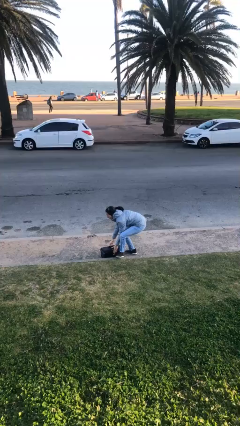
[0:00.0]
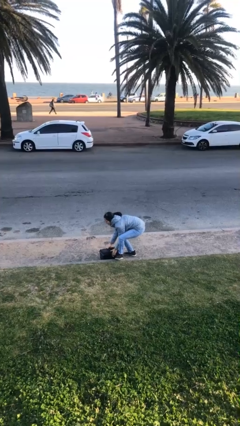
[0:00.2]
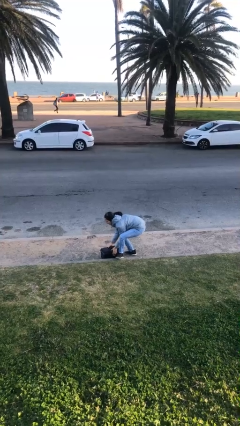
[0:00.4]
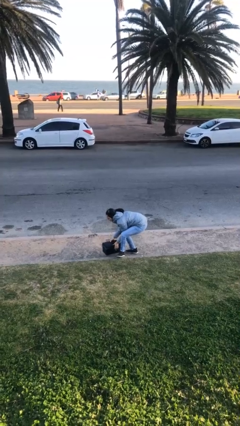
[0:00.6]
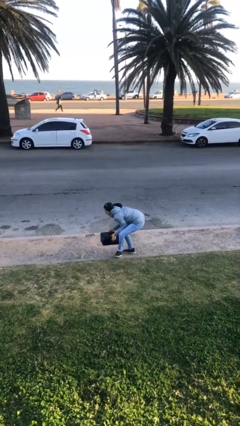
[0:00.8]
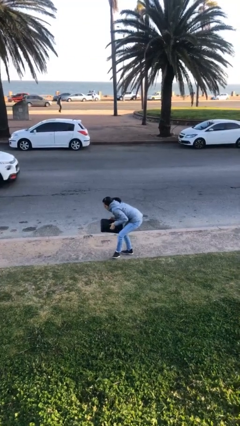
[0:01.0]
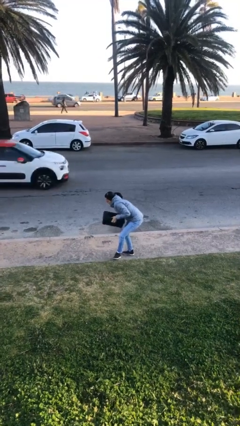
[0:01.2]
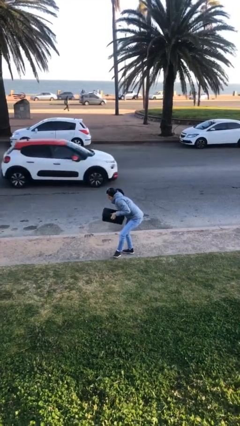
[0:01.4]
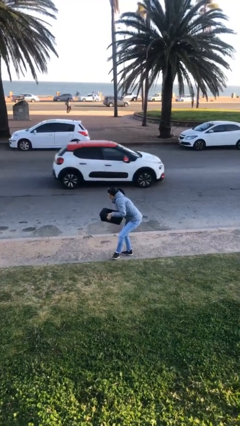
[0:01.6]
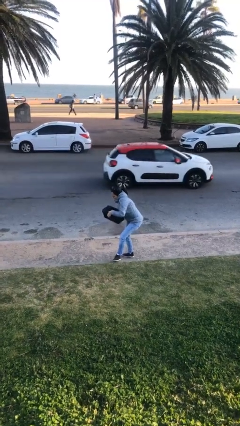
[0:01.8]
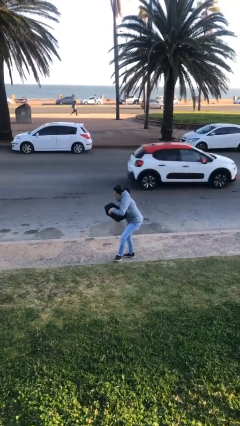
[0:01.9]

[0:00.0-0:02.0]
person picks up object from floor

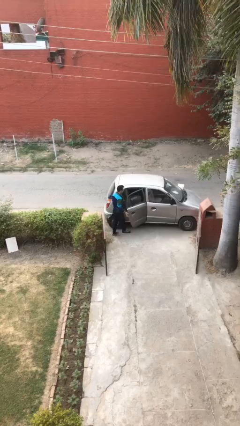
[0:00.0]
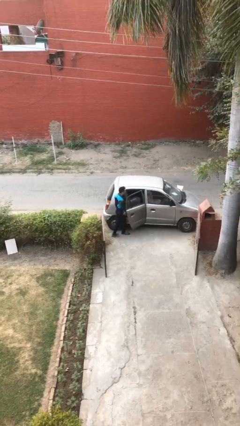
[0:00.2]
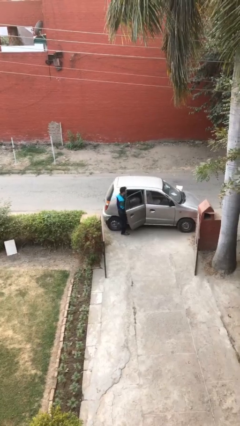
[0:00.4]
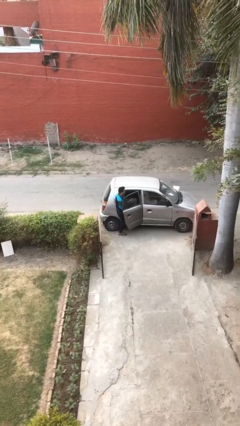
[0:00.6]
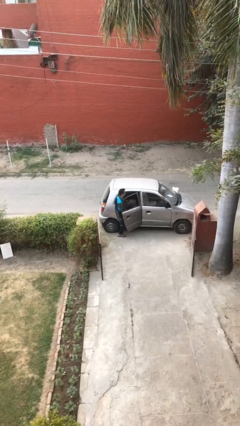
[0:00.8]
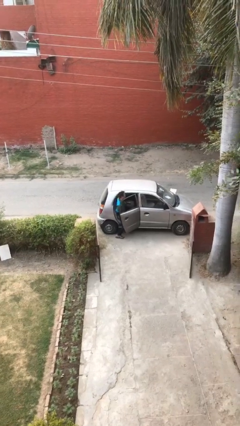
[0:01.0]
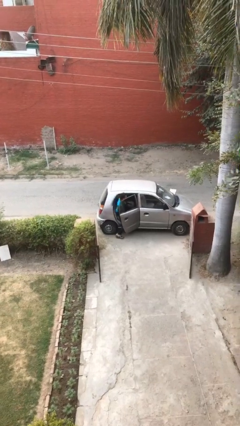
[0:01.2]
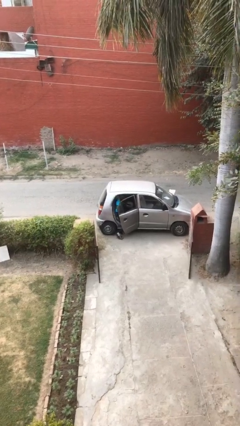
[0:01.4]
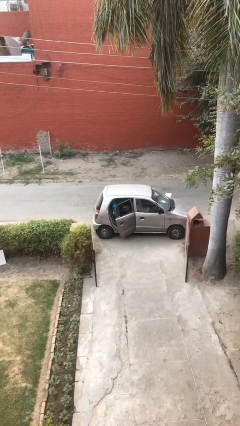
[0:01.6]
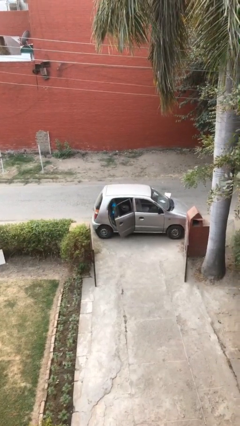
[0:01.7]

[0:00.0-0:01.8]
person enters car

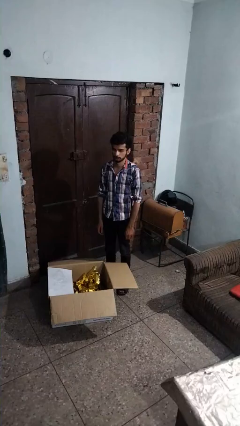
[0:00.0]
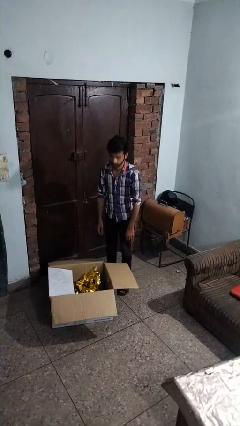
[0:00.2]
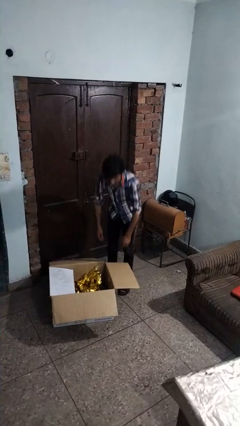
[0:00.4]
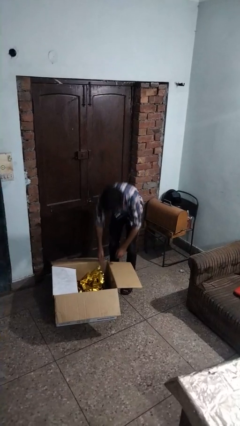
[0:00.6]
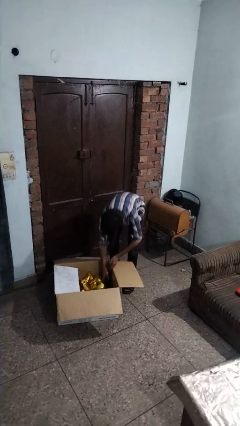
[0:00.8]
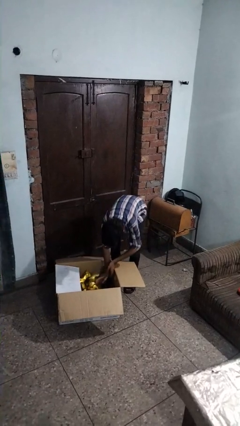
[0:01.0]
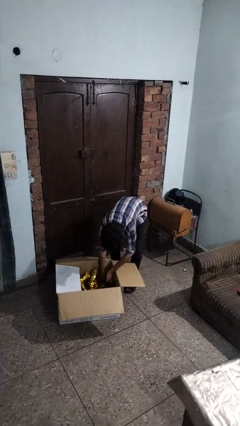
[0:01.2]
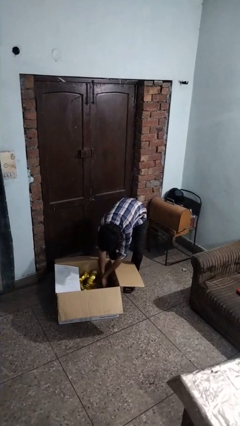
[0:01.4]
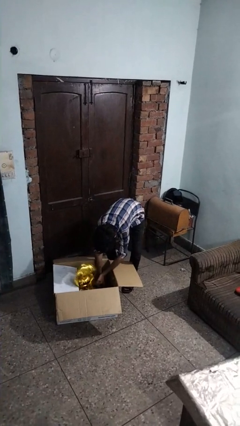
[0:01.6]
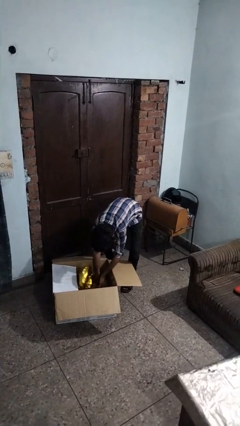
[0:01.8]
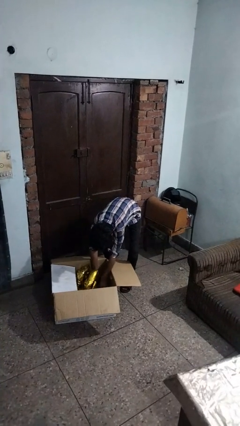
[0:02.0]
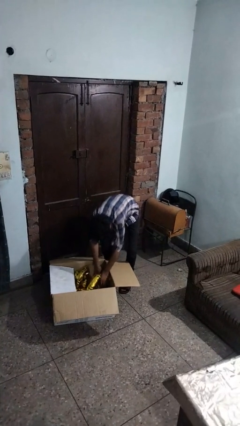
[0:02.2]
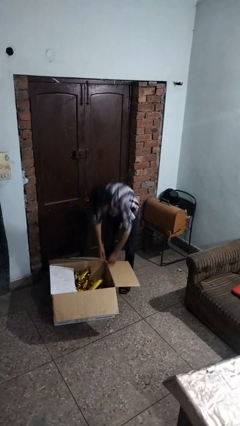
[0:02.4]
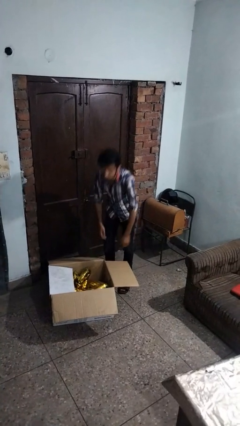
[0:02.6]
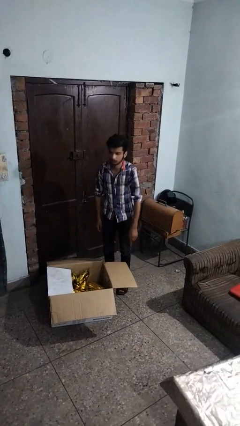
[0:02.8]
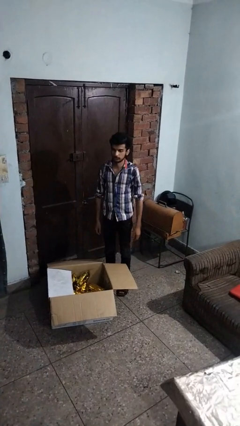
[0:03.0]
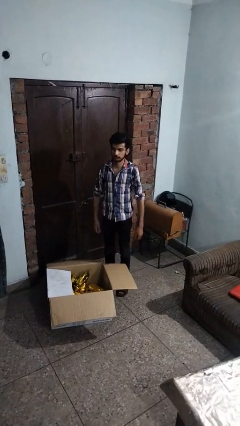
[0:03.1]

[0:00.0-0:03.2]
person searches in box

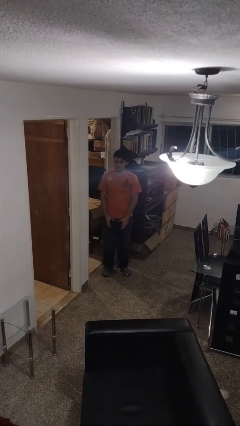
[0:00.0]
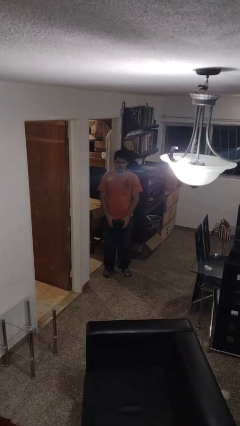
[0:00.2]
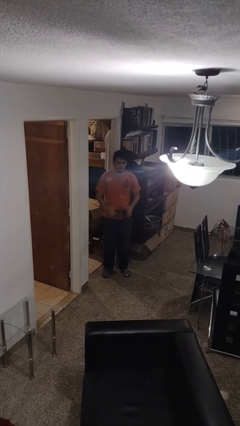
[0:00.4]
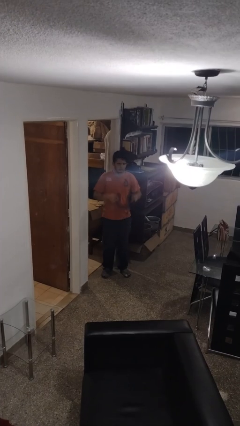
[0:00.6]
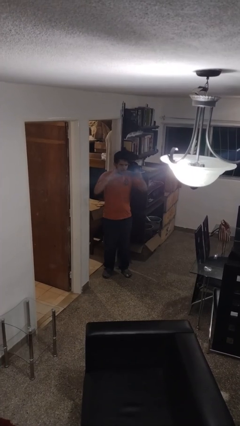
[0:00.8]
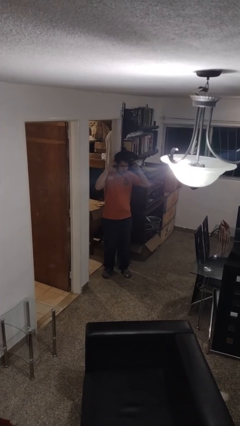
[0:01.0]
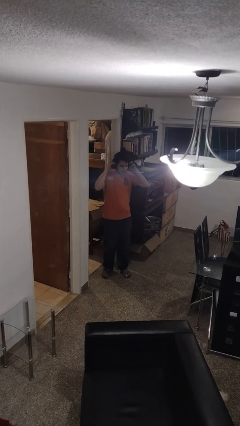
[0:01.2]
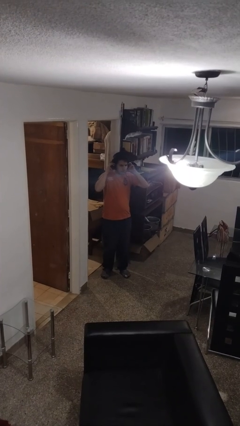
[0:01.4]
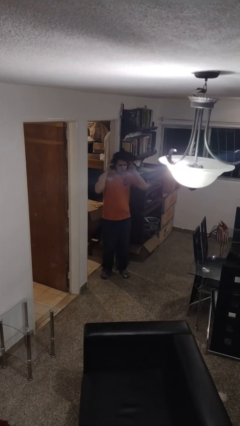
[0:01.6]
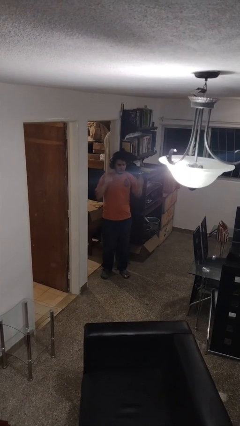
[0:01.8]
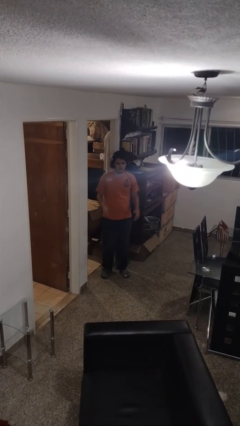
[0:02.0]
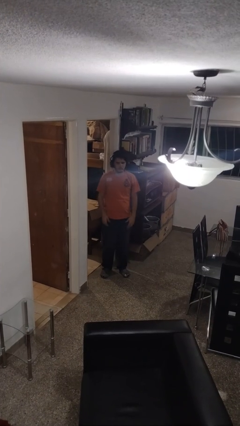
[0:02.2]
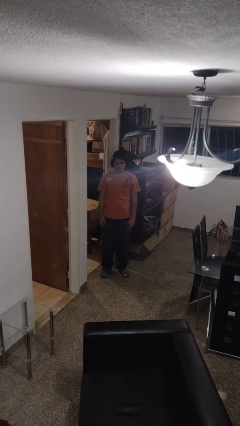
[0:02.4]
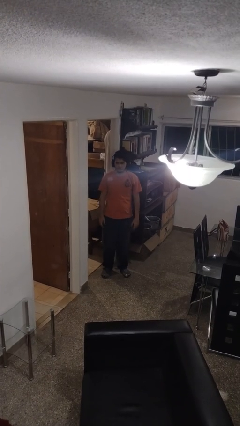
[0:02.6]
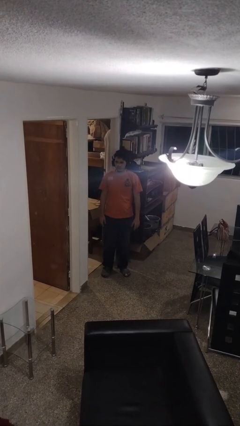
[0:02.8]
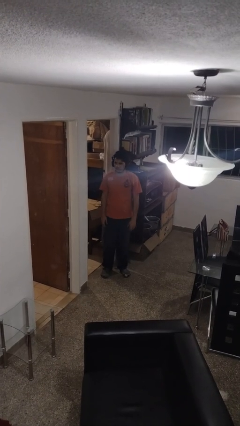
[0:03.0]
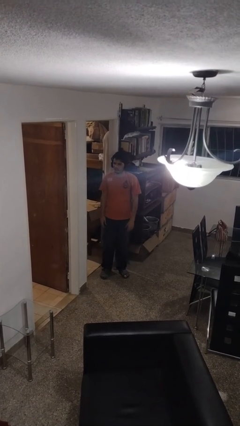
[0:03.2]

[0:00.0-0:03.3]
person puts on headphones

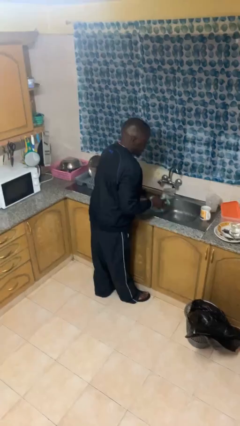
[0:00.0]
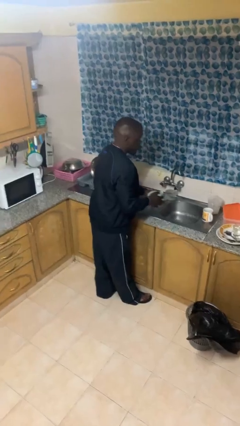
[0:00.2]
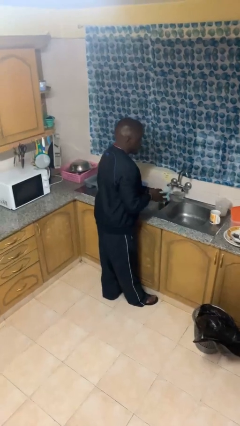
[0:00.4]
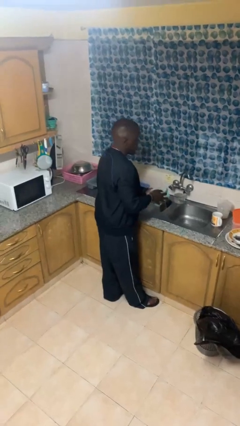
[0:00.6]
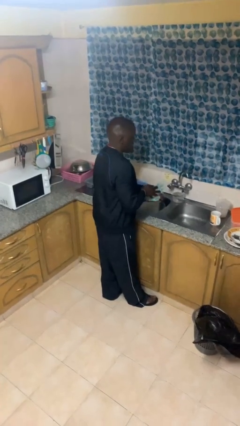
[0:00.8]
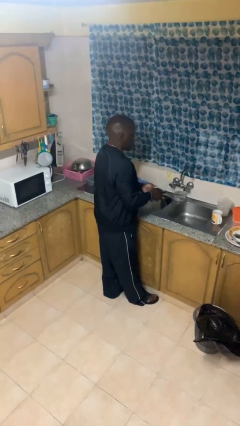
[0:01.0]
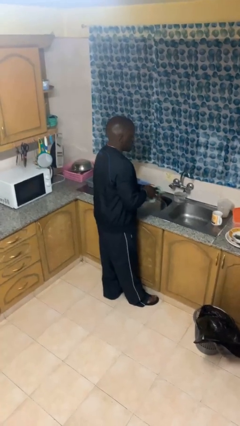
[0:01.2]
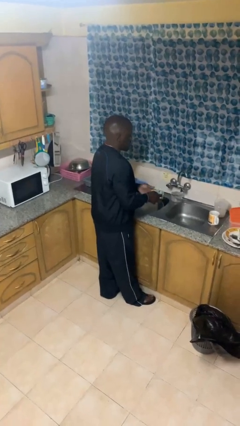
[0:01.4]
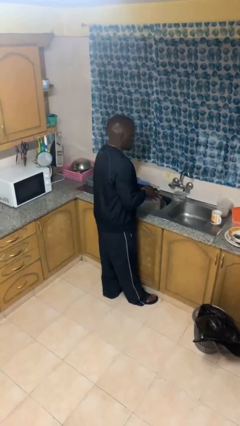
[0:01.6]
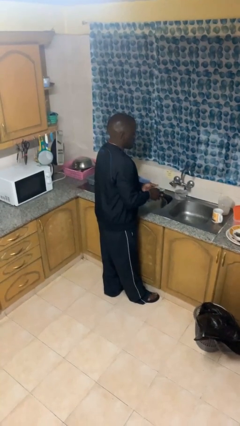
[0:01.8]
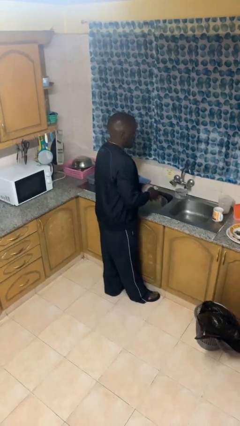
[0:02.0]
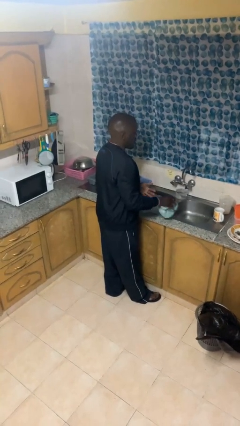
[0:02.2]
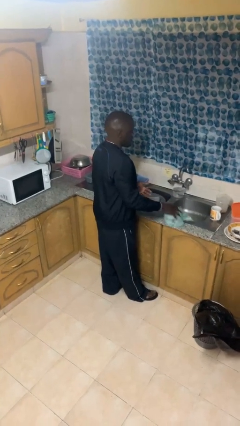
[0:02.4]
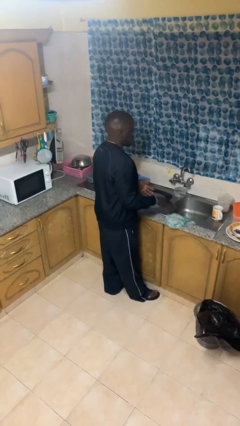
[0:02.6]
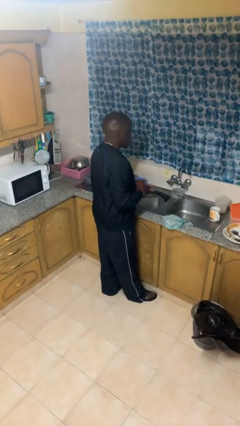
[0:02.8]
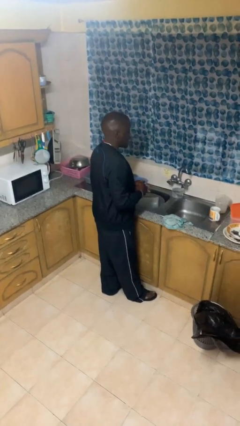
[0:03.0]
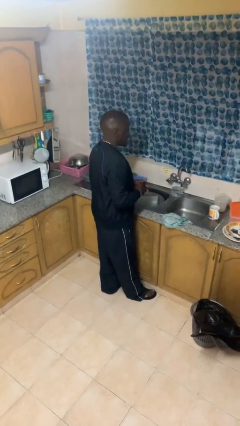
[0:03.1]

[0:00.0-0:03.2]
person dries hands with towel

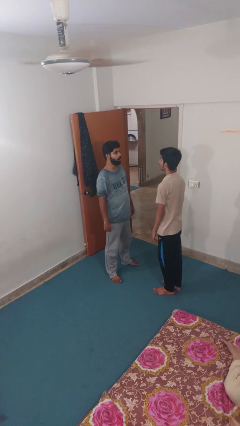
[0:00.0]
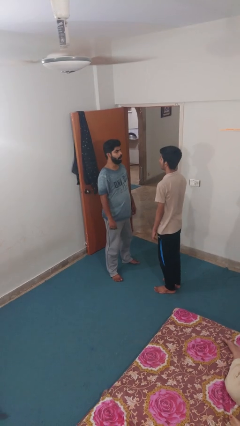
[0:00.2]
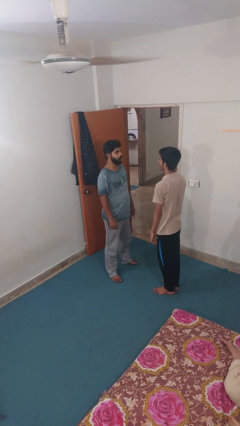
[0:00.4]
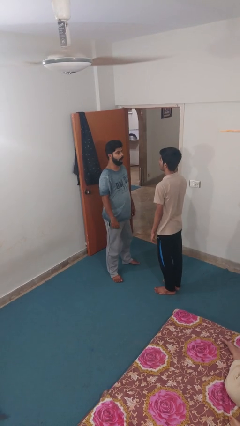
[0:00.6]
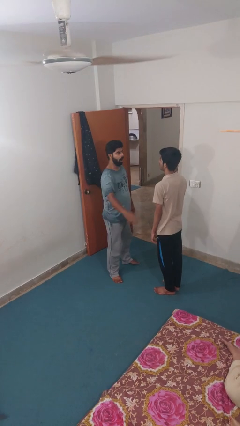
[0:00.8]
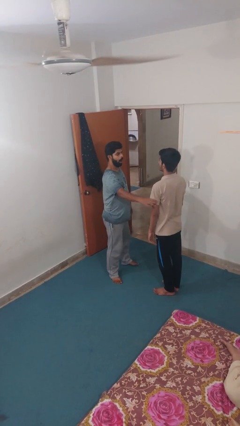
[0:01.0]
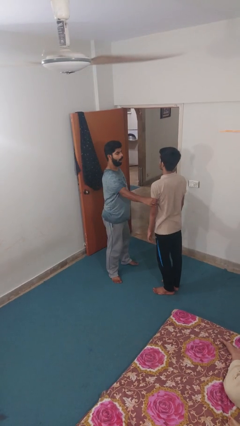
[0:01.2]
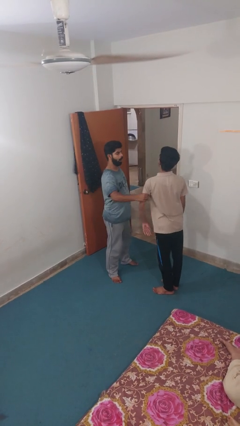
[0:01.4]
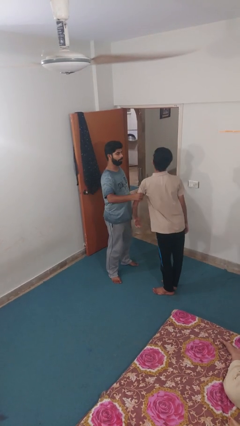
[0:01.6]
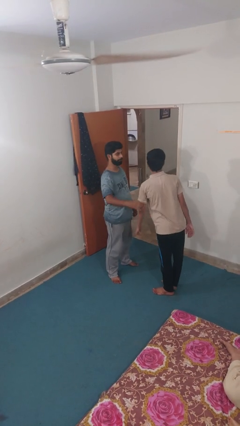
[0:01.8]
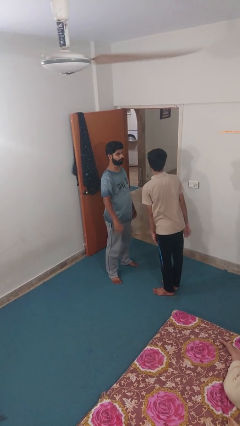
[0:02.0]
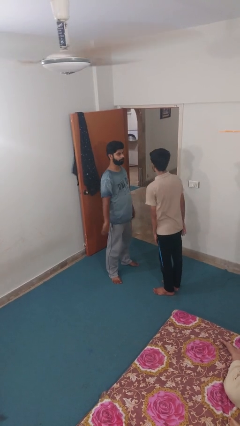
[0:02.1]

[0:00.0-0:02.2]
person grabs person by bicep

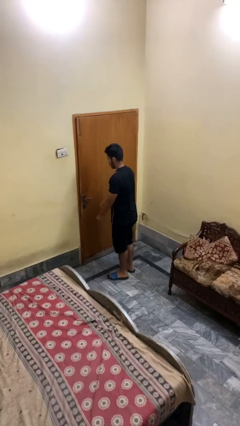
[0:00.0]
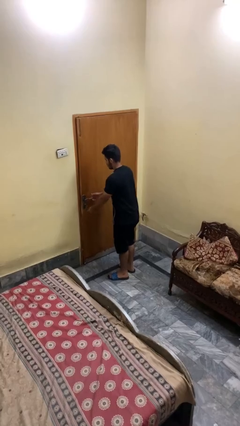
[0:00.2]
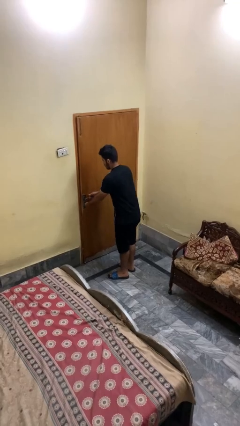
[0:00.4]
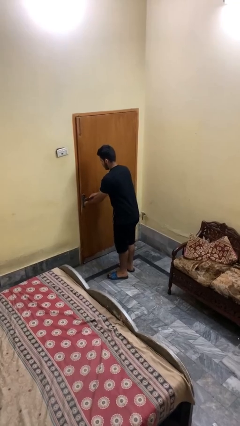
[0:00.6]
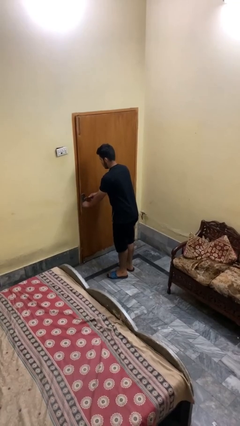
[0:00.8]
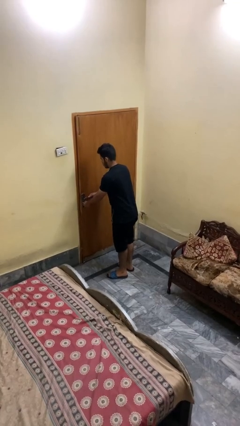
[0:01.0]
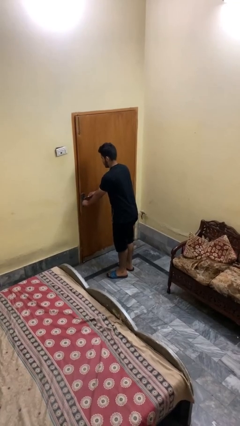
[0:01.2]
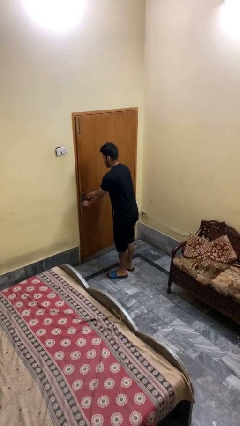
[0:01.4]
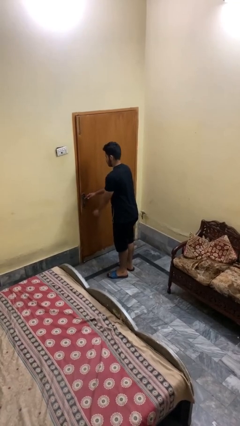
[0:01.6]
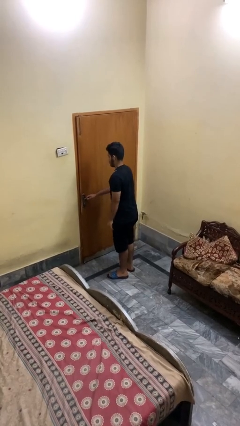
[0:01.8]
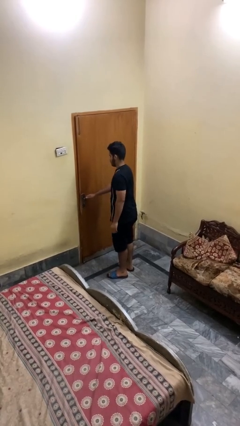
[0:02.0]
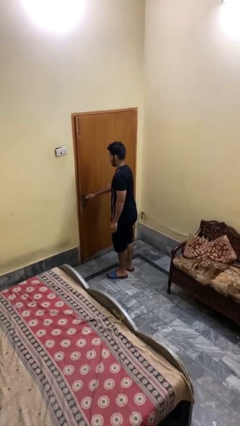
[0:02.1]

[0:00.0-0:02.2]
person unlocks door with keys
